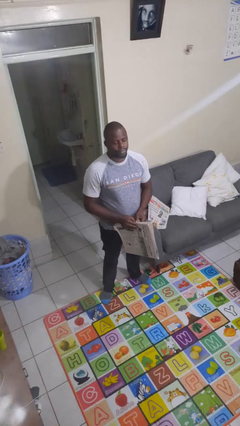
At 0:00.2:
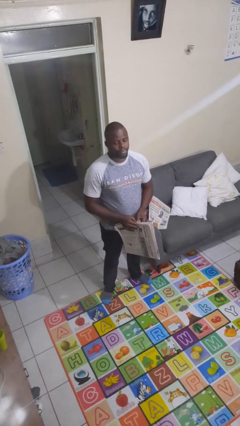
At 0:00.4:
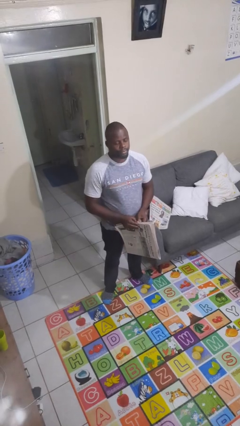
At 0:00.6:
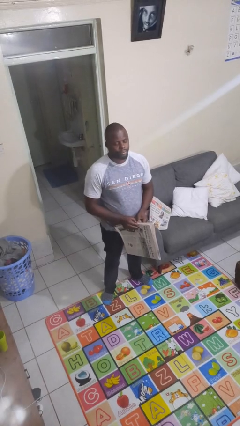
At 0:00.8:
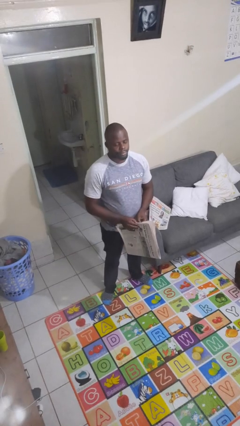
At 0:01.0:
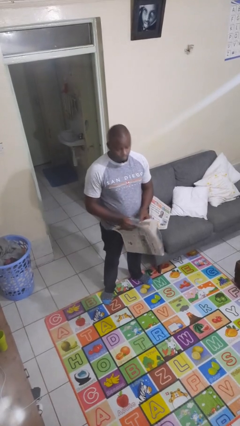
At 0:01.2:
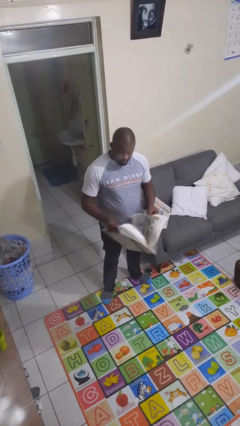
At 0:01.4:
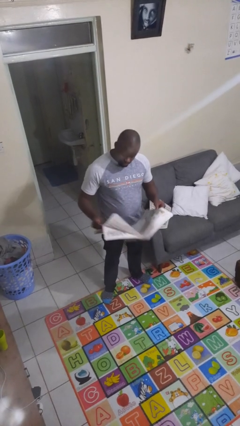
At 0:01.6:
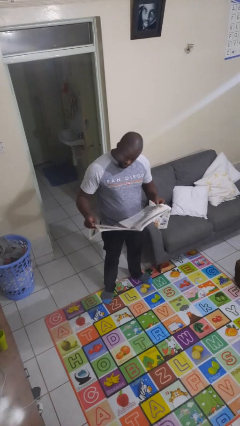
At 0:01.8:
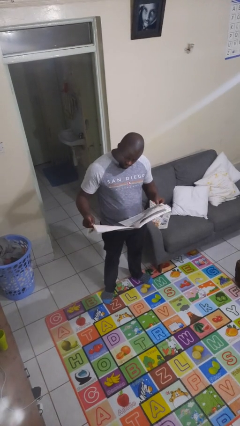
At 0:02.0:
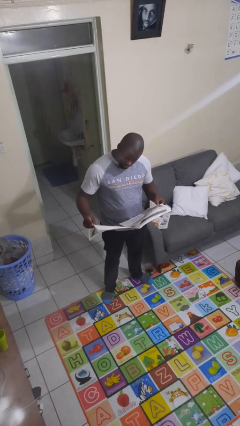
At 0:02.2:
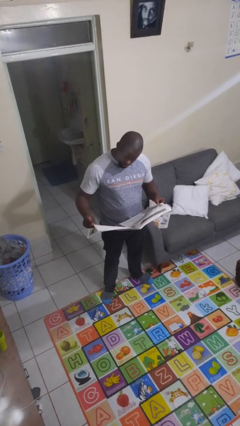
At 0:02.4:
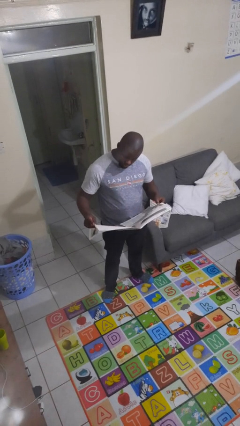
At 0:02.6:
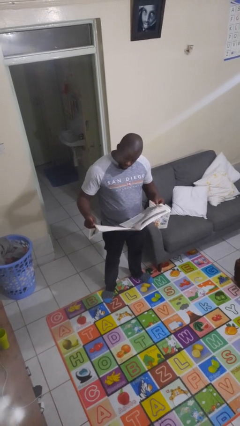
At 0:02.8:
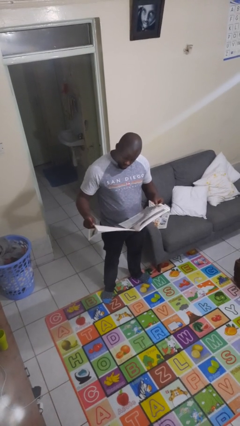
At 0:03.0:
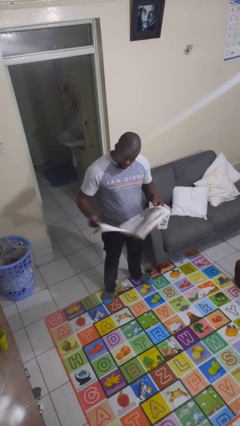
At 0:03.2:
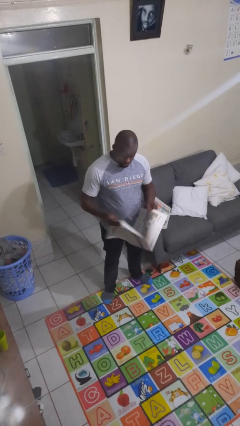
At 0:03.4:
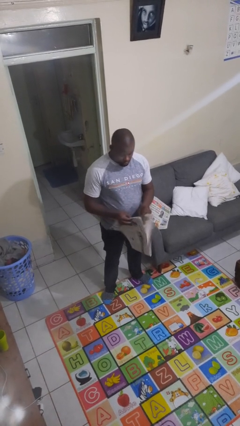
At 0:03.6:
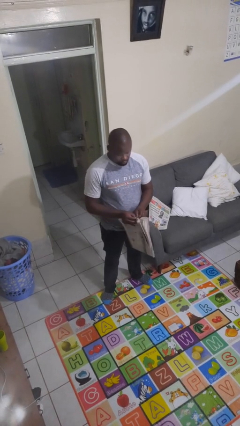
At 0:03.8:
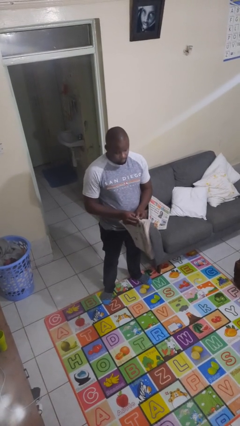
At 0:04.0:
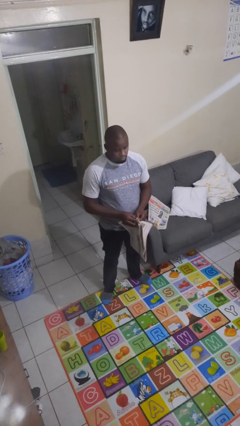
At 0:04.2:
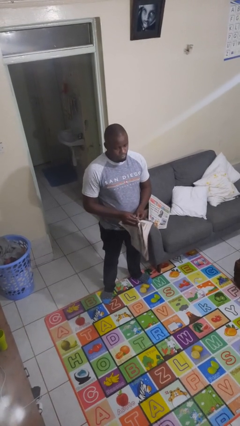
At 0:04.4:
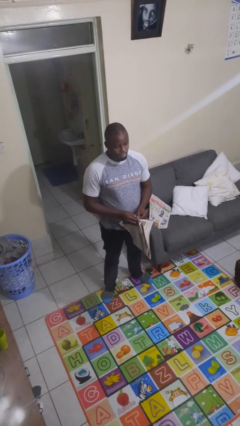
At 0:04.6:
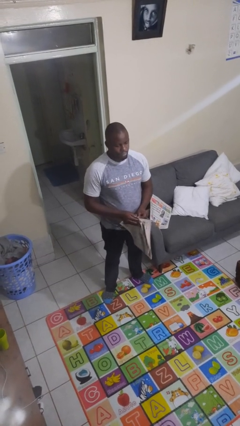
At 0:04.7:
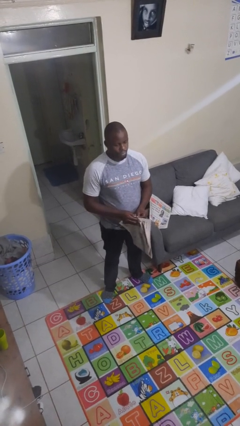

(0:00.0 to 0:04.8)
person reads newspaper

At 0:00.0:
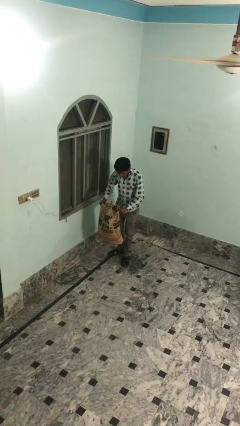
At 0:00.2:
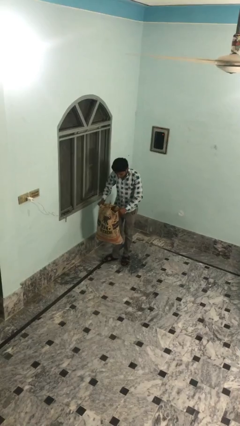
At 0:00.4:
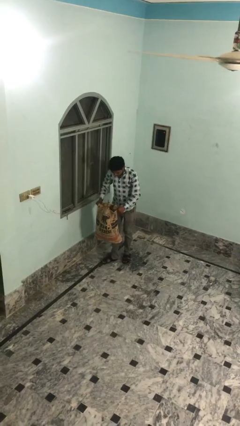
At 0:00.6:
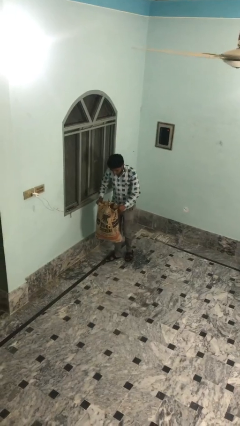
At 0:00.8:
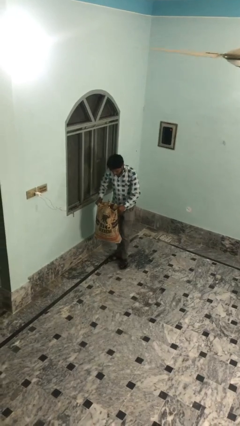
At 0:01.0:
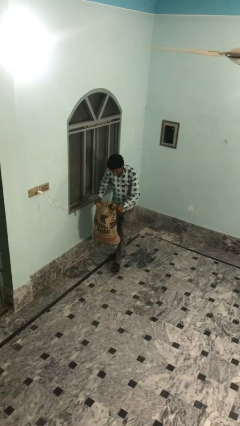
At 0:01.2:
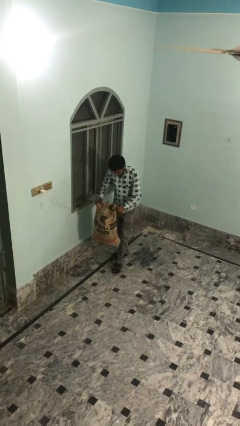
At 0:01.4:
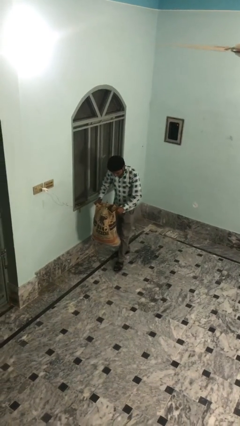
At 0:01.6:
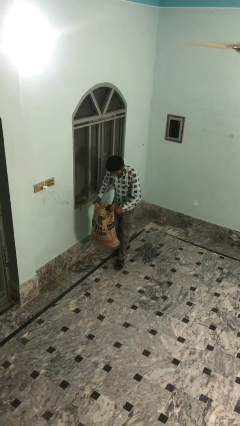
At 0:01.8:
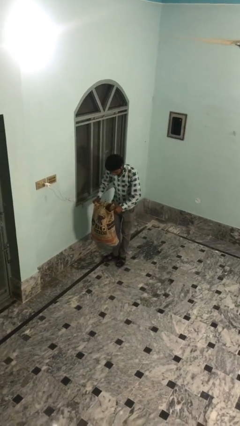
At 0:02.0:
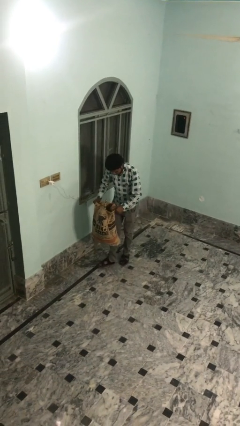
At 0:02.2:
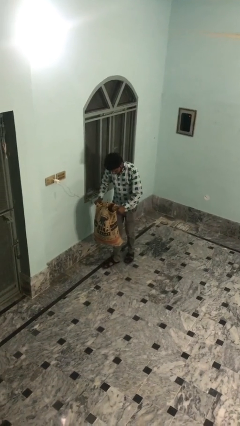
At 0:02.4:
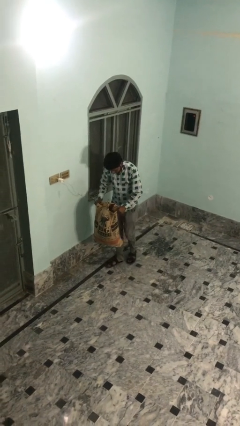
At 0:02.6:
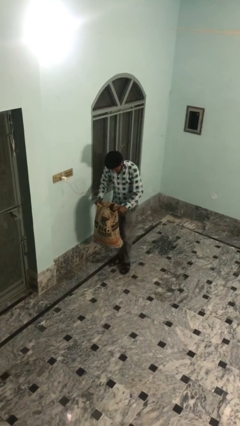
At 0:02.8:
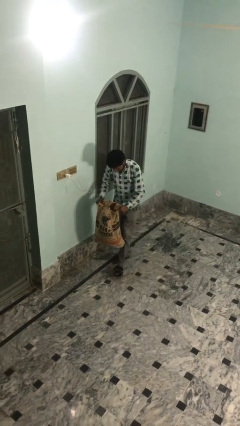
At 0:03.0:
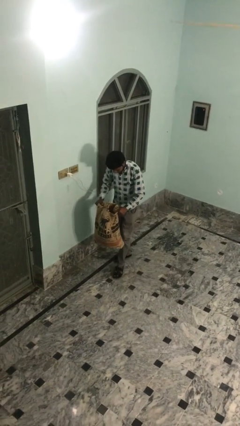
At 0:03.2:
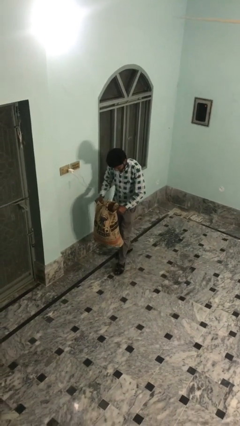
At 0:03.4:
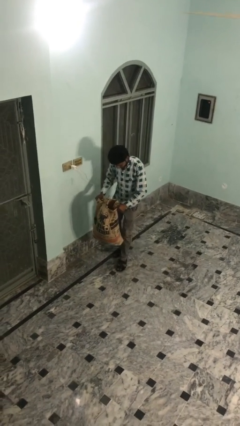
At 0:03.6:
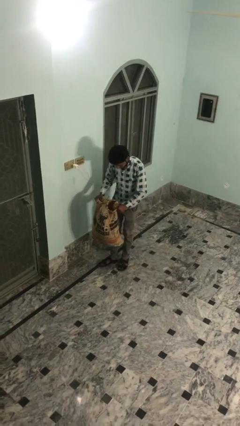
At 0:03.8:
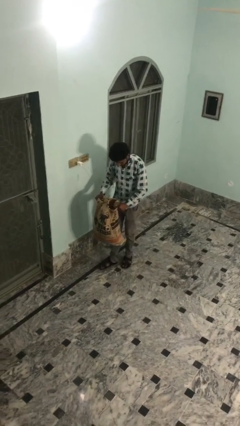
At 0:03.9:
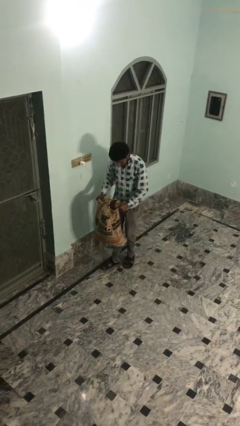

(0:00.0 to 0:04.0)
person carries heavy object

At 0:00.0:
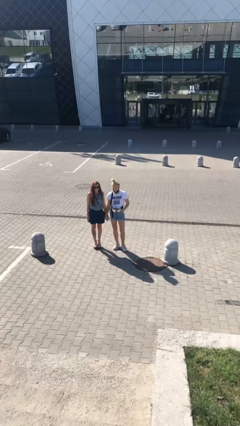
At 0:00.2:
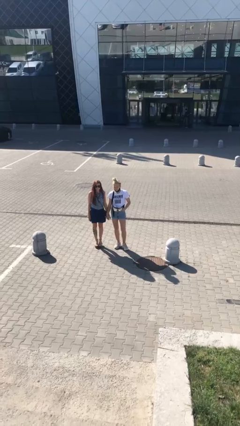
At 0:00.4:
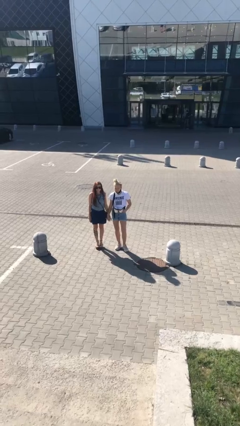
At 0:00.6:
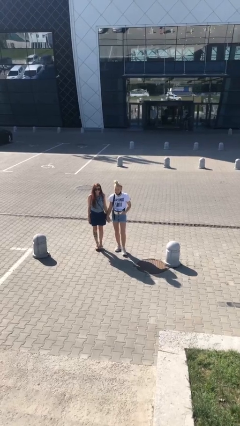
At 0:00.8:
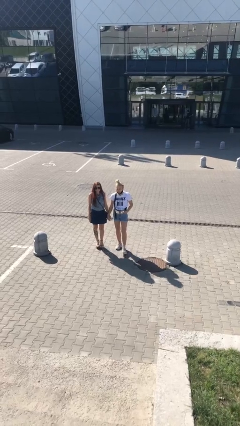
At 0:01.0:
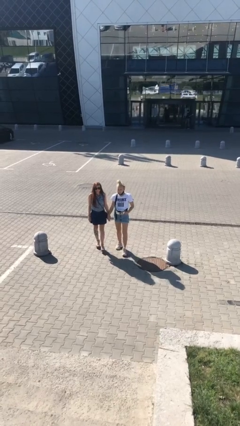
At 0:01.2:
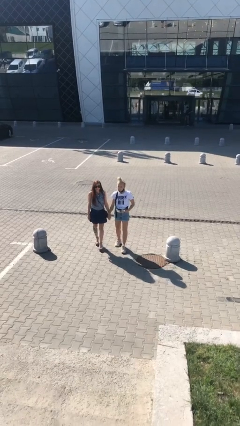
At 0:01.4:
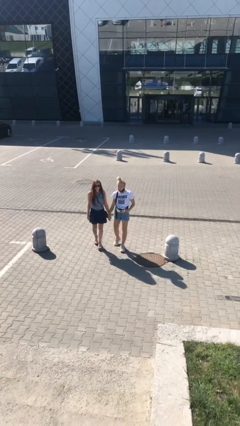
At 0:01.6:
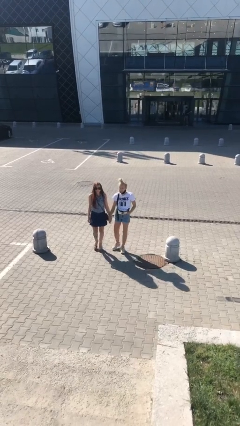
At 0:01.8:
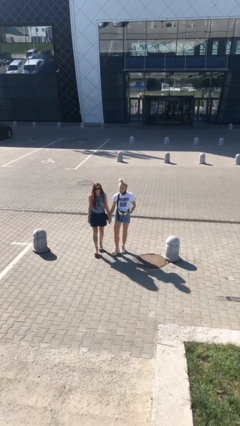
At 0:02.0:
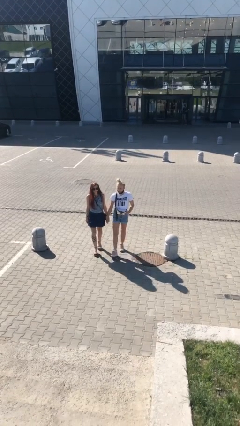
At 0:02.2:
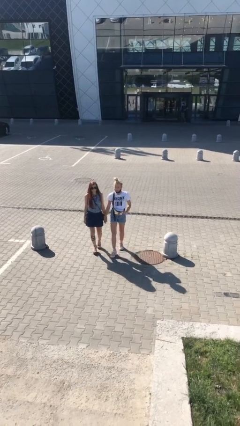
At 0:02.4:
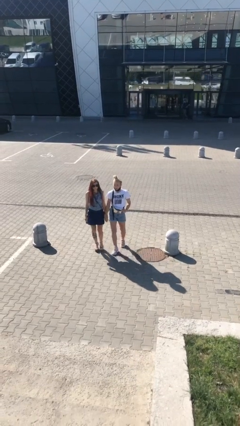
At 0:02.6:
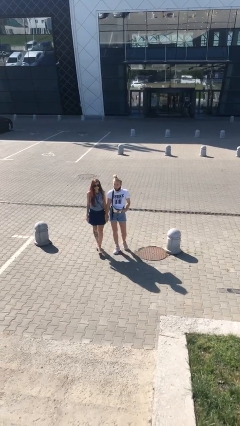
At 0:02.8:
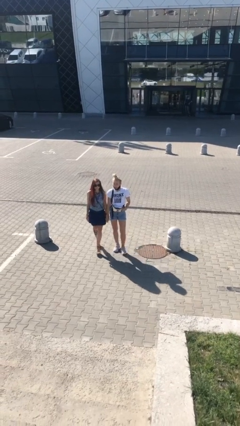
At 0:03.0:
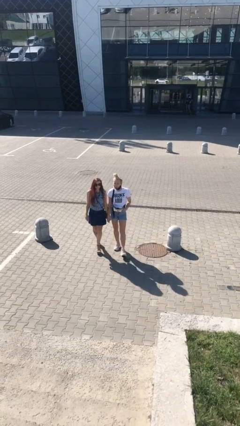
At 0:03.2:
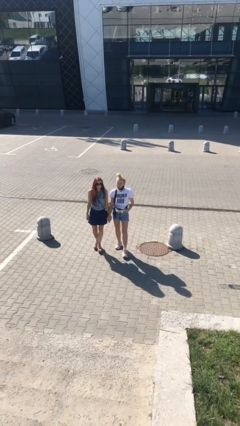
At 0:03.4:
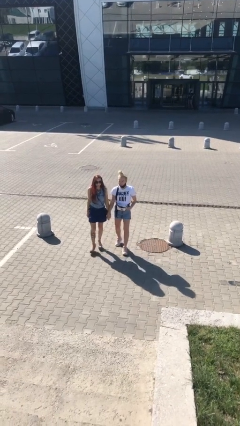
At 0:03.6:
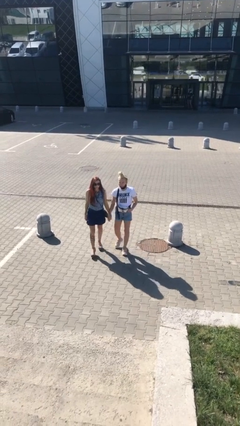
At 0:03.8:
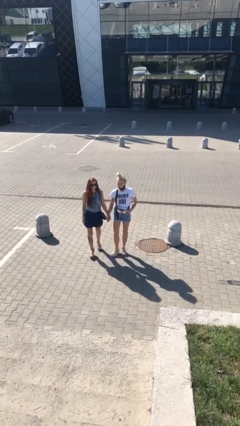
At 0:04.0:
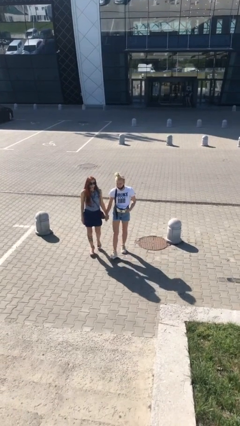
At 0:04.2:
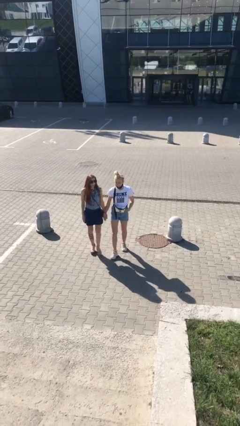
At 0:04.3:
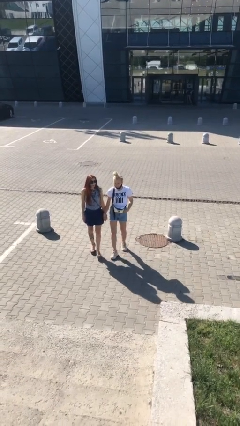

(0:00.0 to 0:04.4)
person holds hand

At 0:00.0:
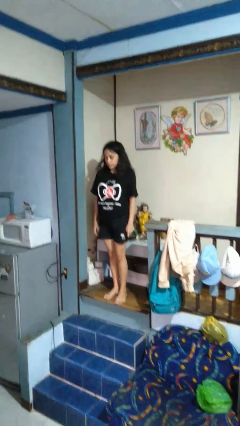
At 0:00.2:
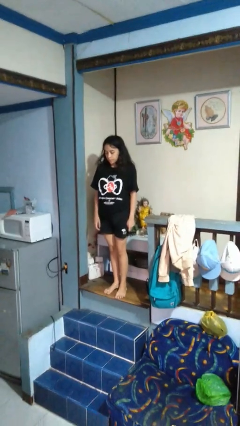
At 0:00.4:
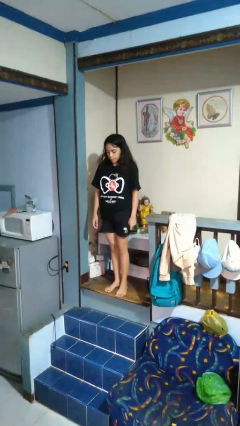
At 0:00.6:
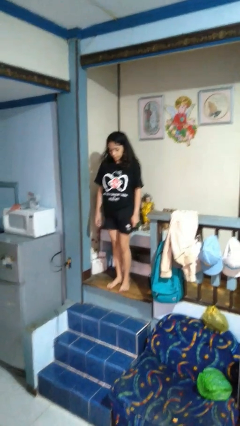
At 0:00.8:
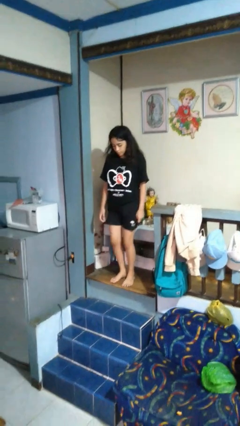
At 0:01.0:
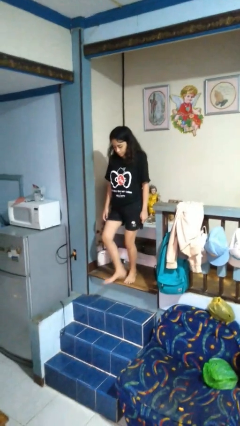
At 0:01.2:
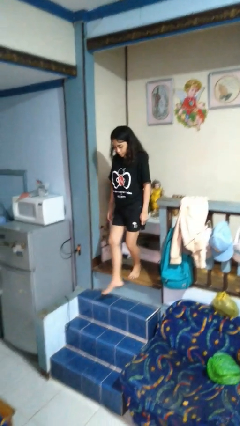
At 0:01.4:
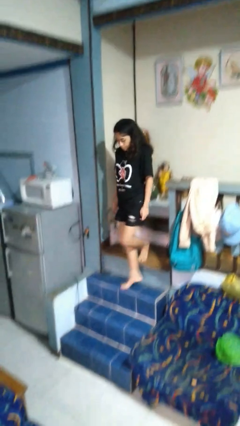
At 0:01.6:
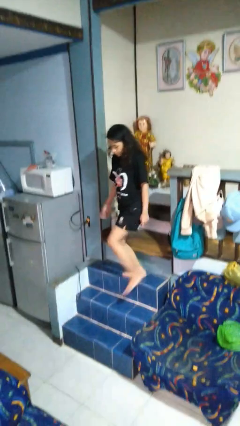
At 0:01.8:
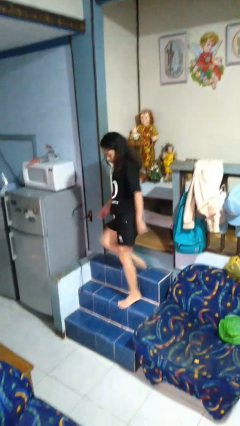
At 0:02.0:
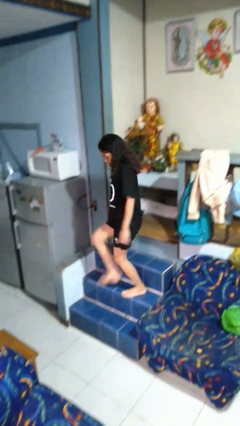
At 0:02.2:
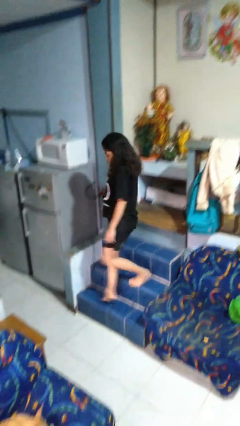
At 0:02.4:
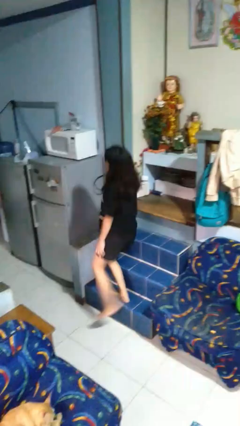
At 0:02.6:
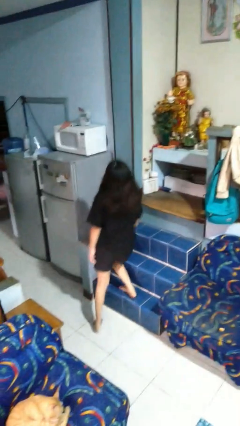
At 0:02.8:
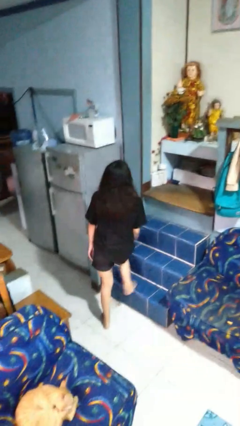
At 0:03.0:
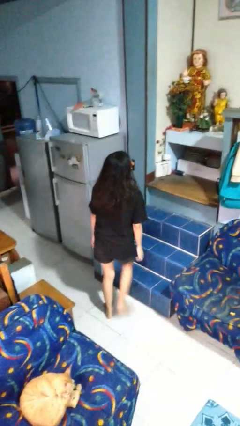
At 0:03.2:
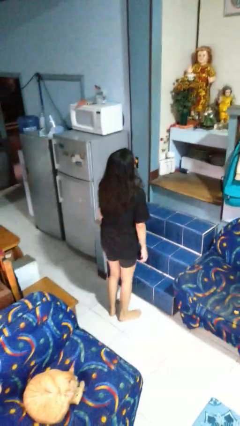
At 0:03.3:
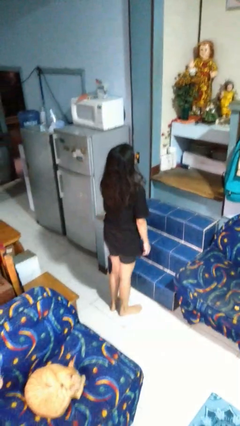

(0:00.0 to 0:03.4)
person climbs down stairs

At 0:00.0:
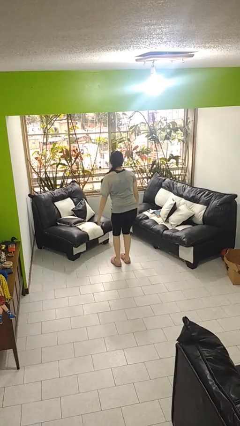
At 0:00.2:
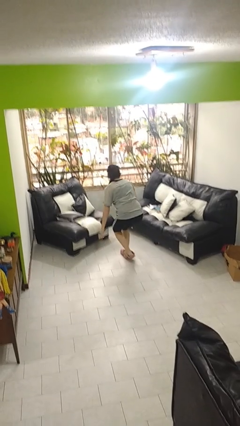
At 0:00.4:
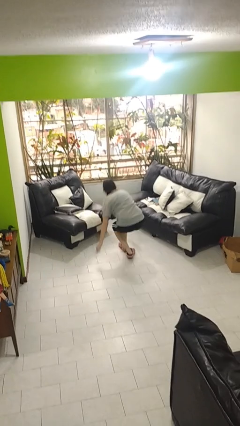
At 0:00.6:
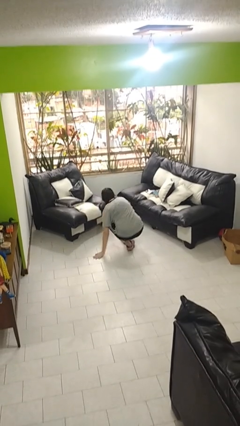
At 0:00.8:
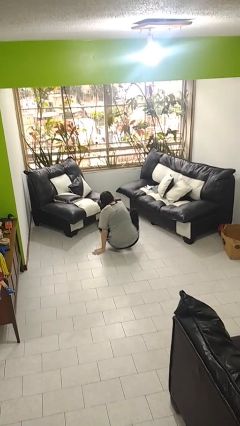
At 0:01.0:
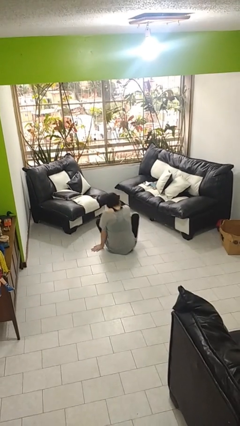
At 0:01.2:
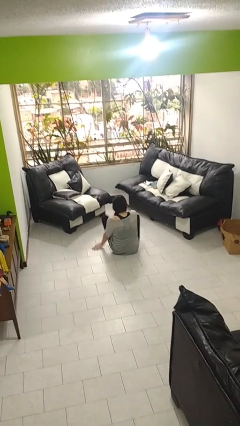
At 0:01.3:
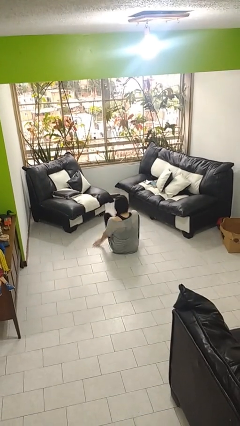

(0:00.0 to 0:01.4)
person sits crisscross
